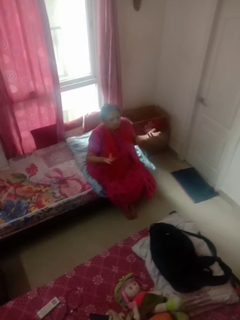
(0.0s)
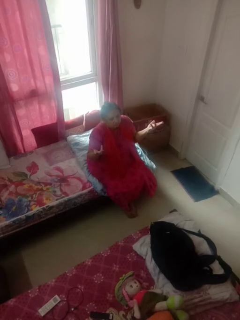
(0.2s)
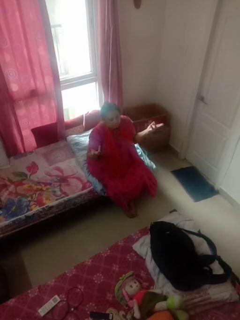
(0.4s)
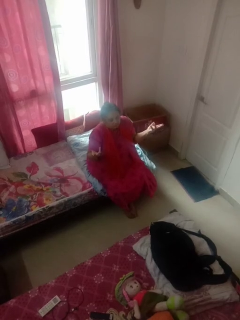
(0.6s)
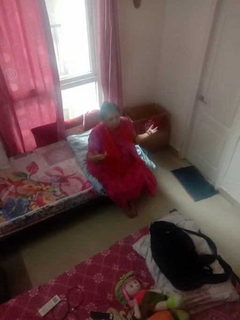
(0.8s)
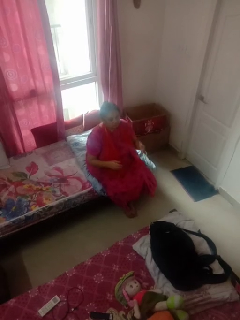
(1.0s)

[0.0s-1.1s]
person shrugs

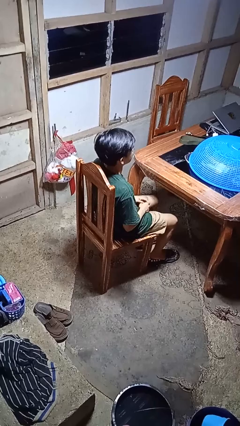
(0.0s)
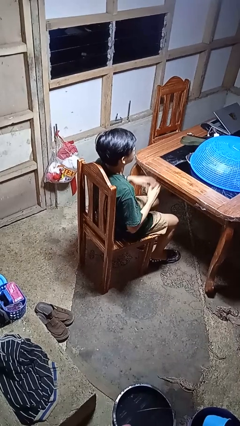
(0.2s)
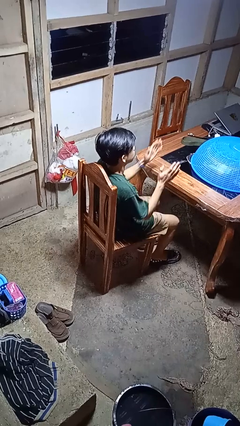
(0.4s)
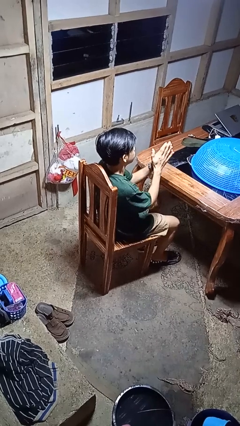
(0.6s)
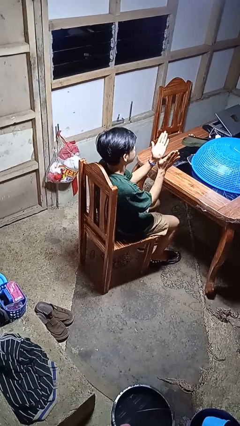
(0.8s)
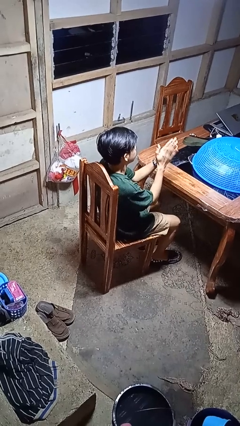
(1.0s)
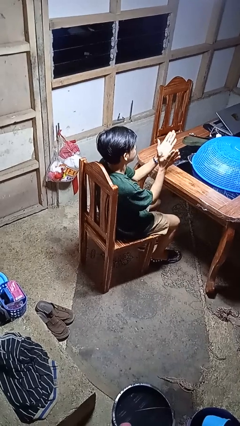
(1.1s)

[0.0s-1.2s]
person claps hands

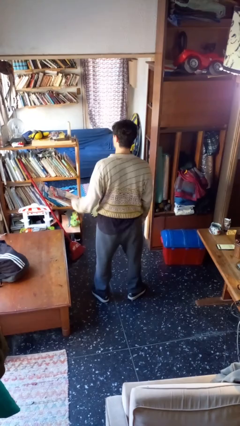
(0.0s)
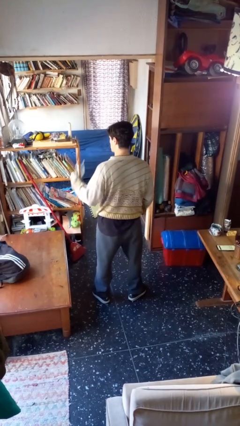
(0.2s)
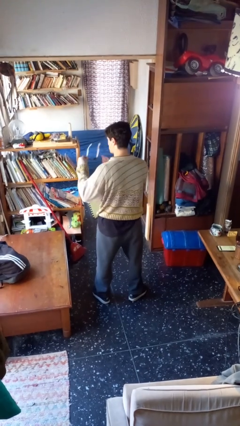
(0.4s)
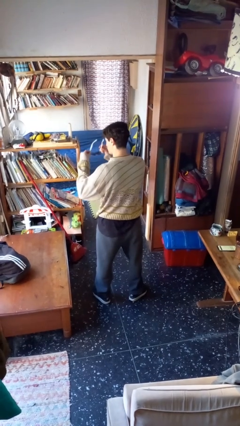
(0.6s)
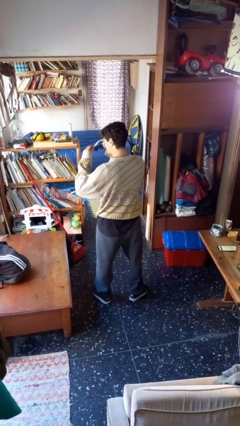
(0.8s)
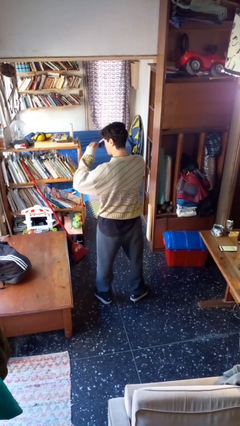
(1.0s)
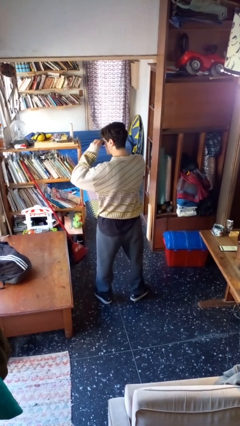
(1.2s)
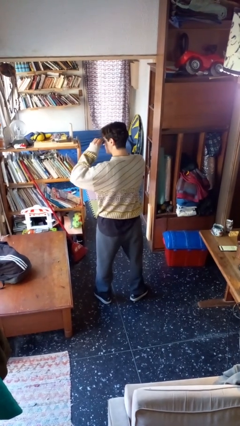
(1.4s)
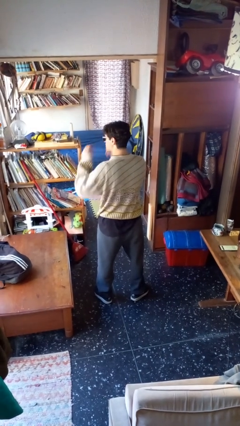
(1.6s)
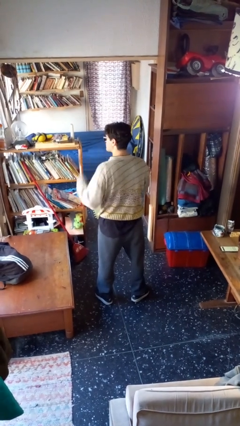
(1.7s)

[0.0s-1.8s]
person puts on sunglasses

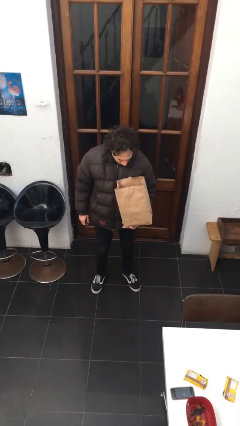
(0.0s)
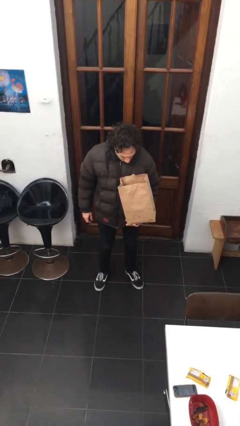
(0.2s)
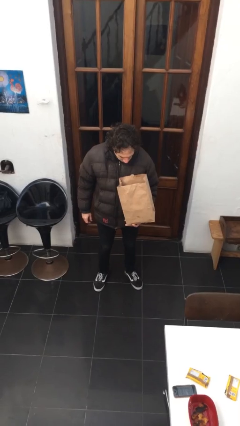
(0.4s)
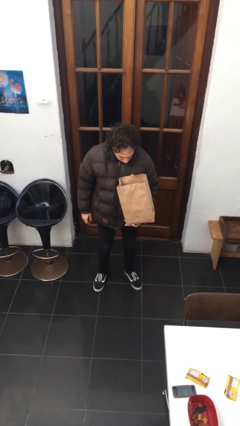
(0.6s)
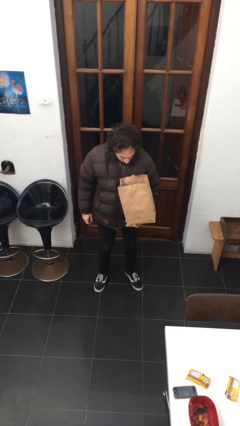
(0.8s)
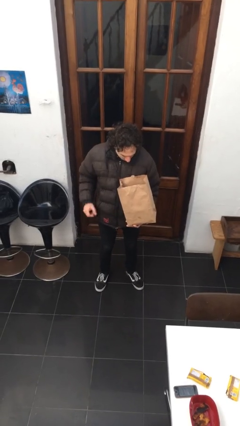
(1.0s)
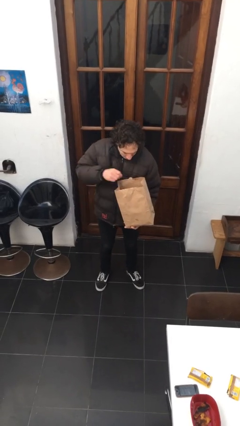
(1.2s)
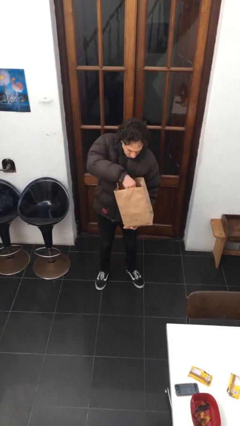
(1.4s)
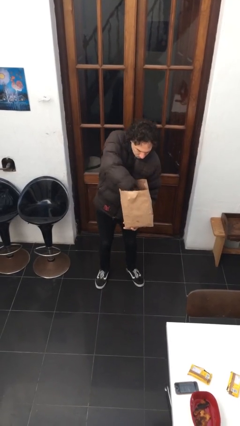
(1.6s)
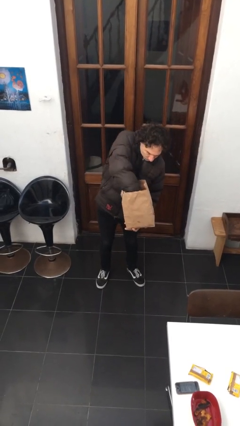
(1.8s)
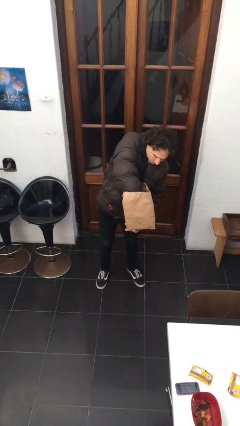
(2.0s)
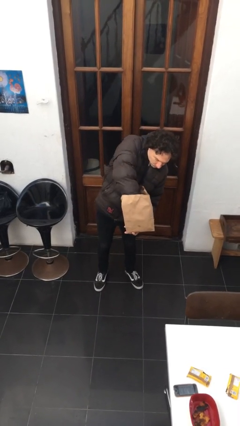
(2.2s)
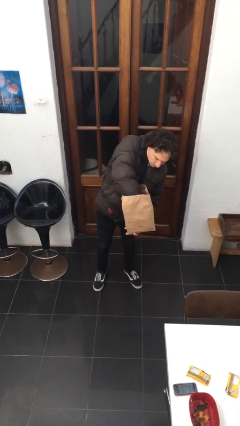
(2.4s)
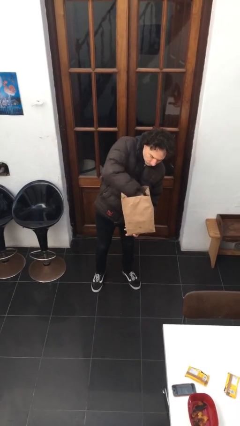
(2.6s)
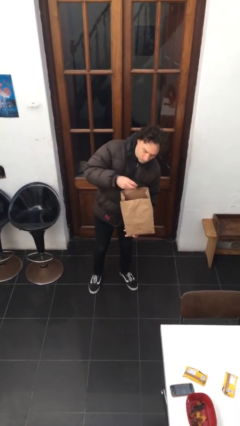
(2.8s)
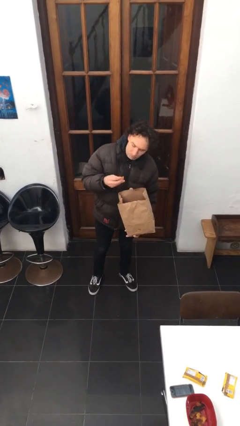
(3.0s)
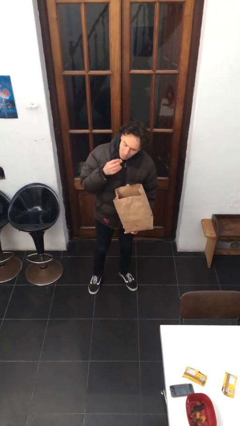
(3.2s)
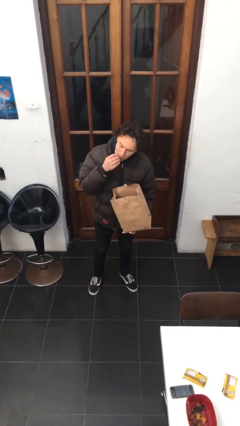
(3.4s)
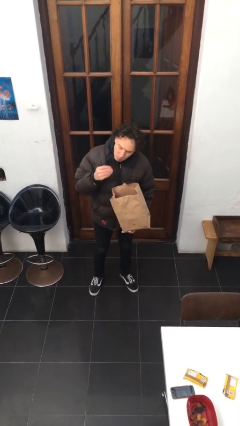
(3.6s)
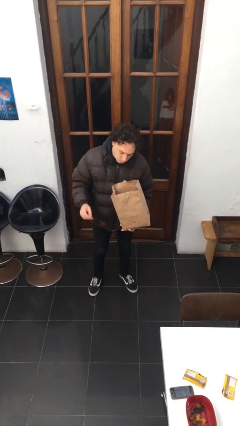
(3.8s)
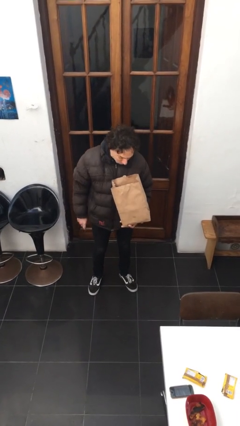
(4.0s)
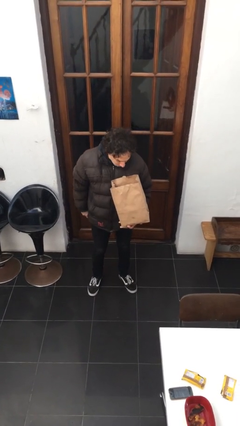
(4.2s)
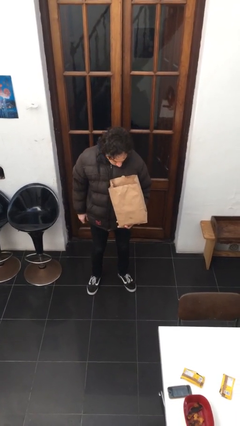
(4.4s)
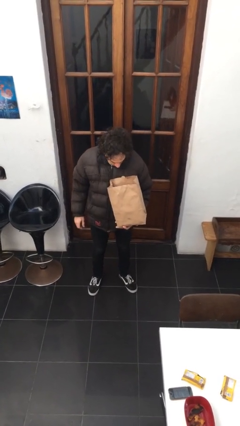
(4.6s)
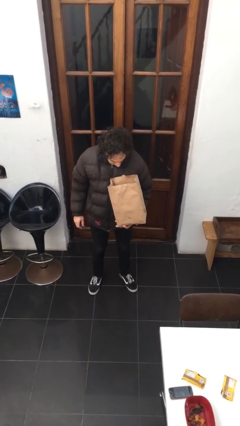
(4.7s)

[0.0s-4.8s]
person eats snack from bag

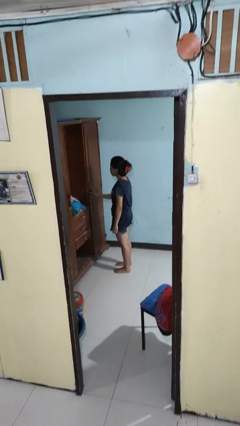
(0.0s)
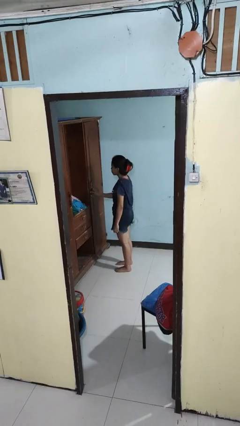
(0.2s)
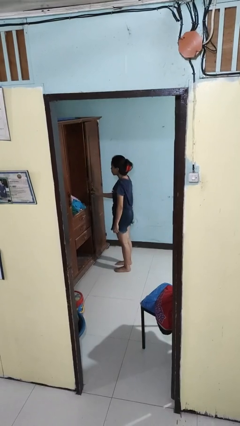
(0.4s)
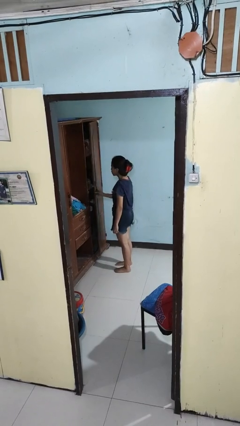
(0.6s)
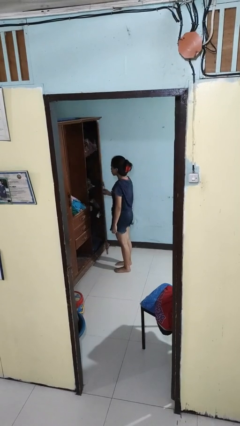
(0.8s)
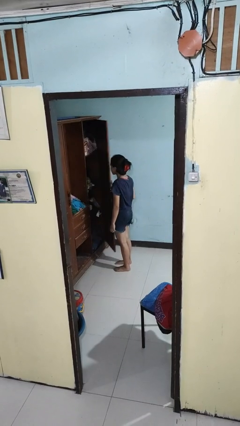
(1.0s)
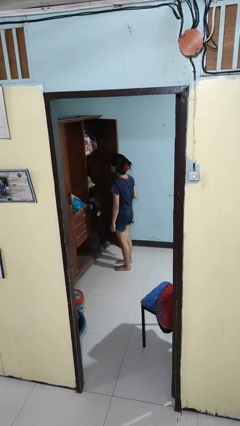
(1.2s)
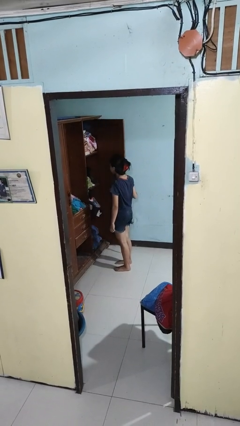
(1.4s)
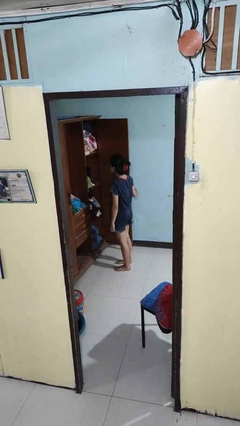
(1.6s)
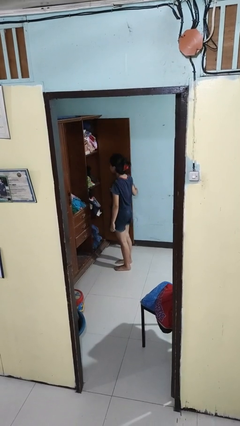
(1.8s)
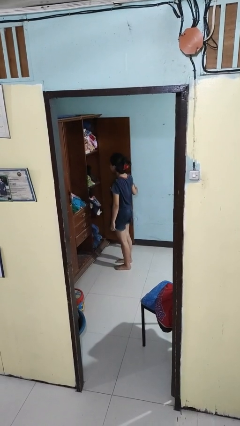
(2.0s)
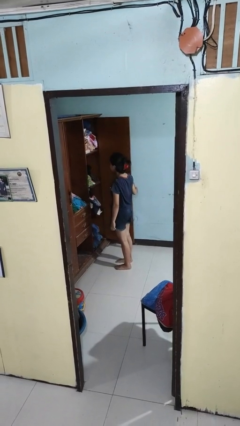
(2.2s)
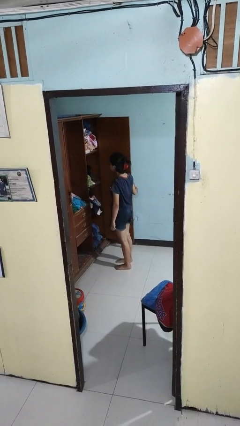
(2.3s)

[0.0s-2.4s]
person opens closet door

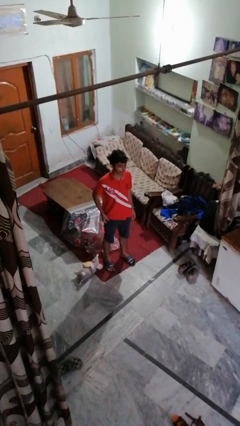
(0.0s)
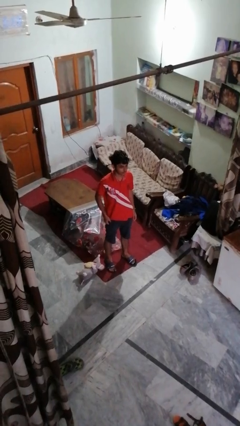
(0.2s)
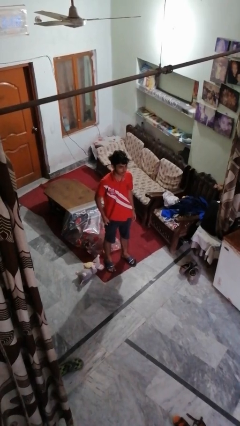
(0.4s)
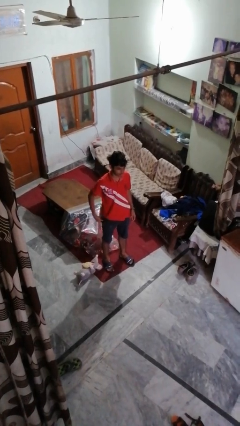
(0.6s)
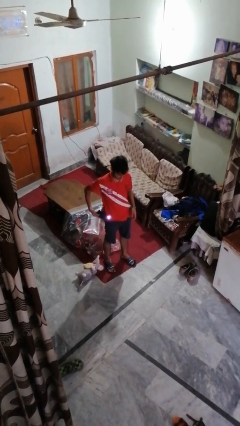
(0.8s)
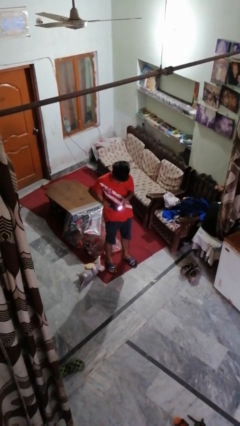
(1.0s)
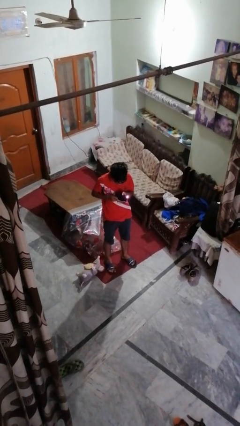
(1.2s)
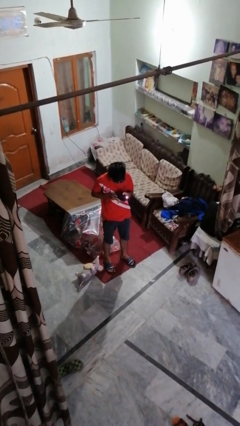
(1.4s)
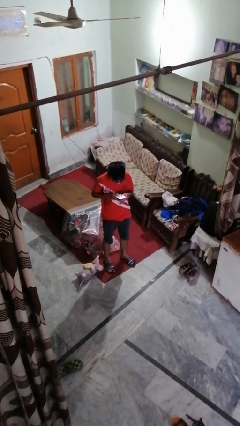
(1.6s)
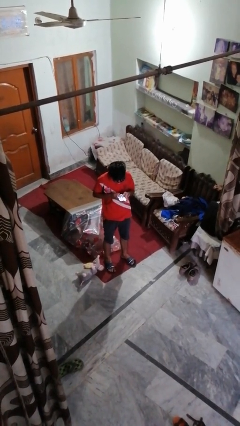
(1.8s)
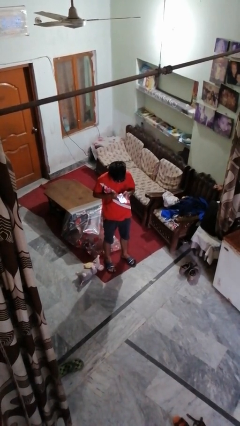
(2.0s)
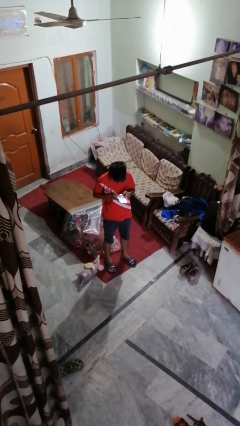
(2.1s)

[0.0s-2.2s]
person takes phone from pocket

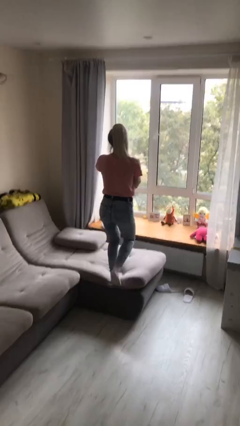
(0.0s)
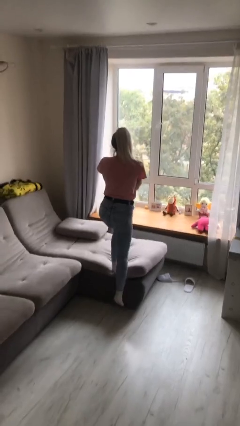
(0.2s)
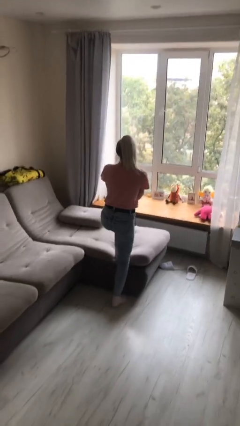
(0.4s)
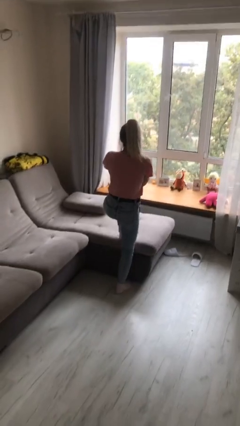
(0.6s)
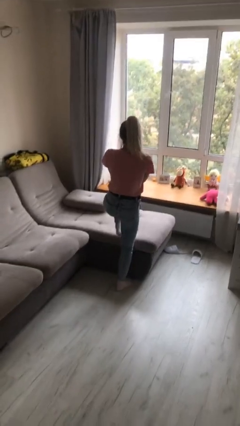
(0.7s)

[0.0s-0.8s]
person climbs off couch

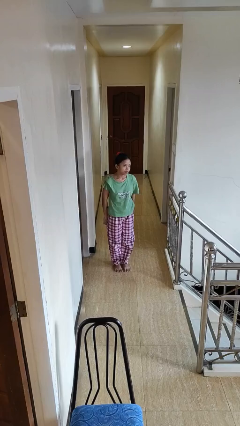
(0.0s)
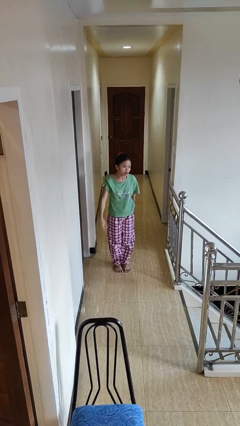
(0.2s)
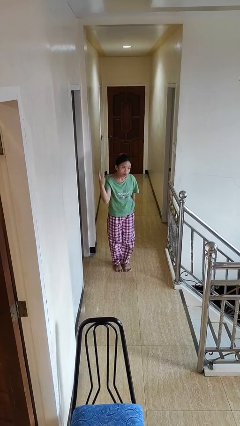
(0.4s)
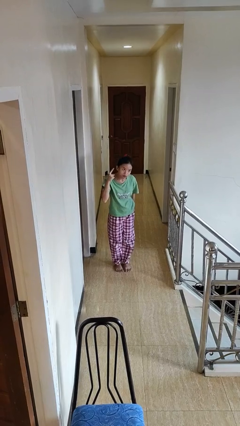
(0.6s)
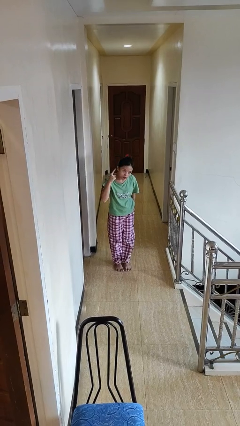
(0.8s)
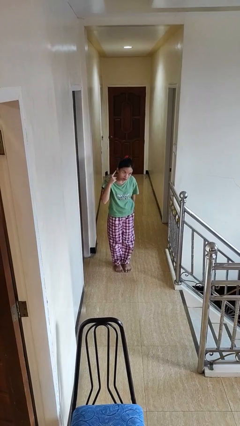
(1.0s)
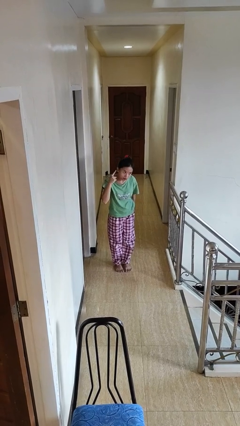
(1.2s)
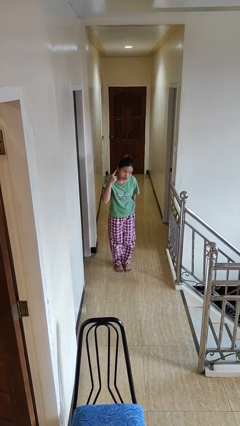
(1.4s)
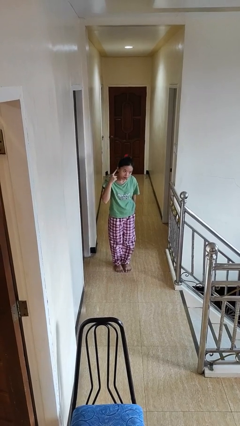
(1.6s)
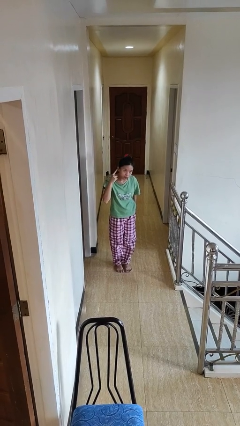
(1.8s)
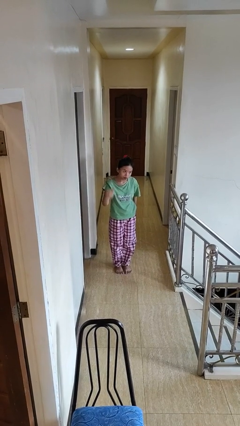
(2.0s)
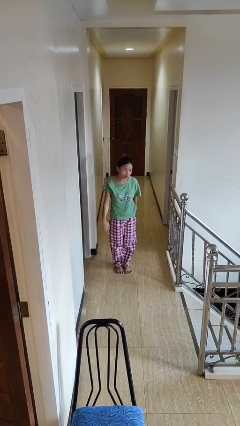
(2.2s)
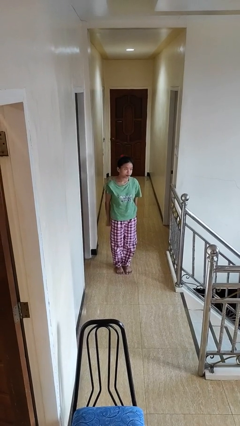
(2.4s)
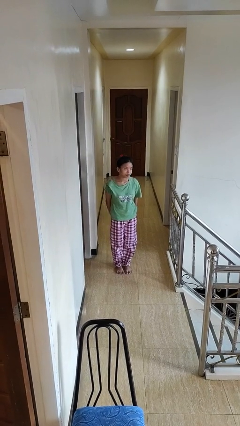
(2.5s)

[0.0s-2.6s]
person gestures listen closely

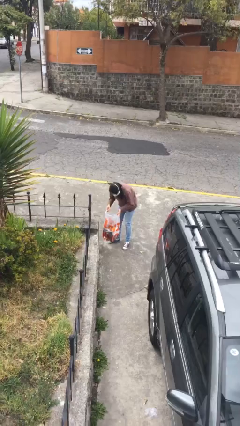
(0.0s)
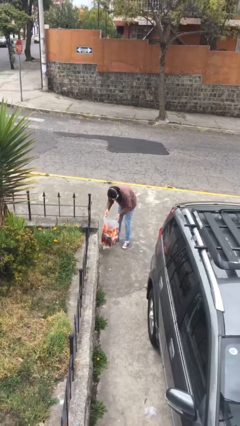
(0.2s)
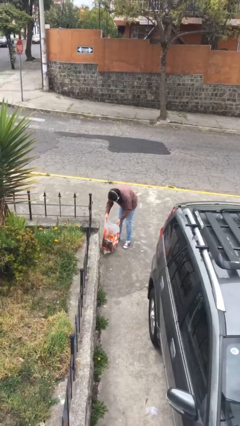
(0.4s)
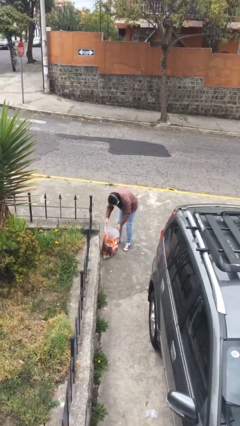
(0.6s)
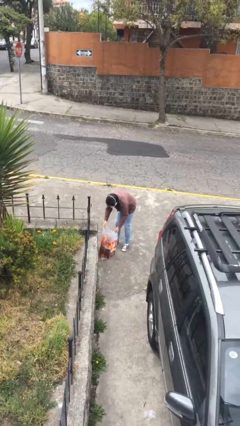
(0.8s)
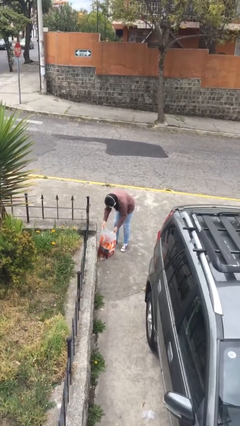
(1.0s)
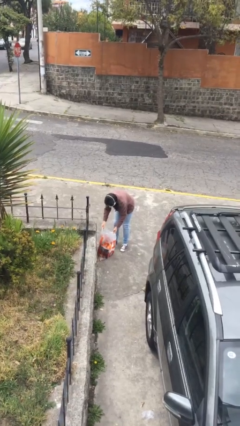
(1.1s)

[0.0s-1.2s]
person puts down object on floor
